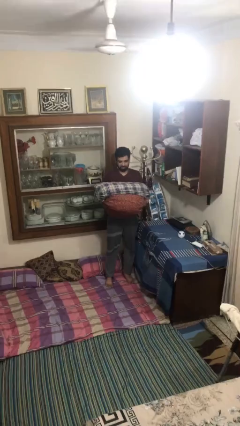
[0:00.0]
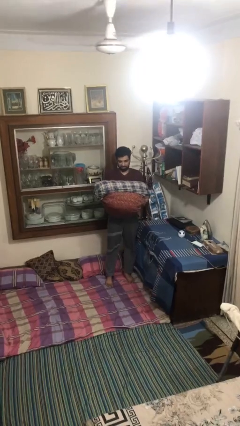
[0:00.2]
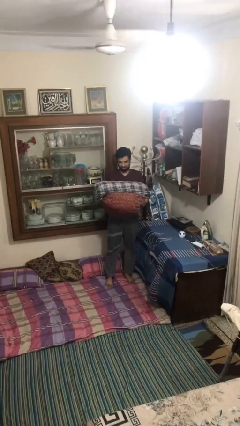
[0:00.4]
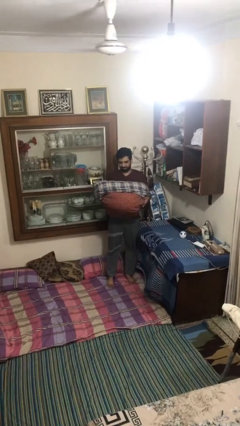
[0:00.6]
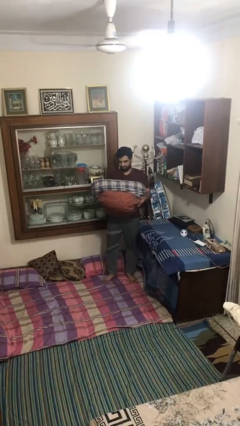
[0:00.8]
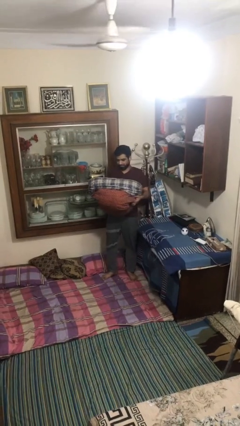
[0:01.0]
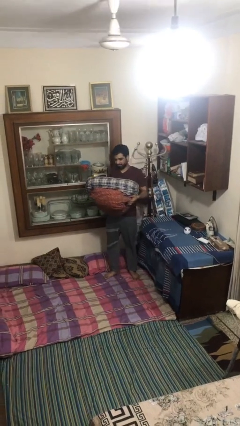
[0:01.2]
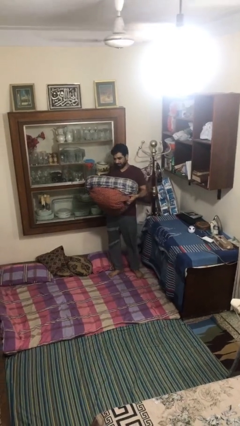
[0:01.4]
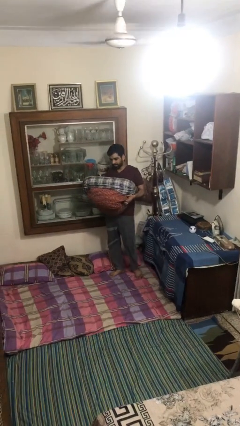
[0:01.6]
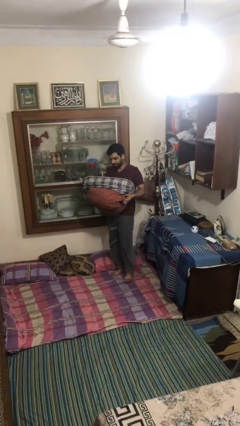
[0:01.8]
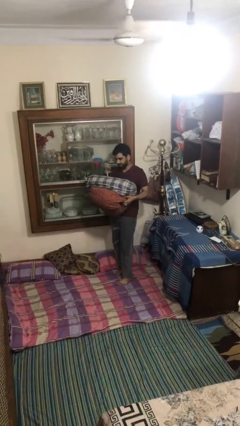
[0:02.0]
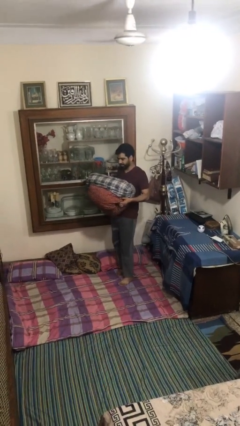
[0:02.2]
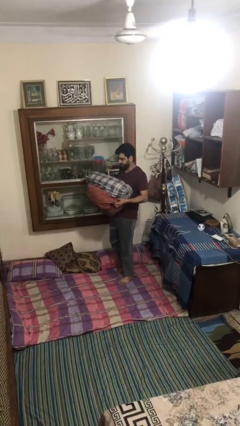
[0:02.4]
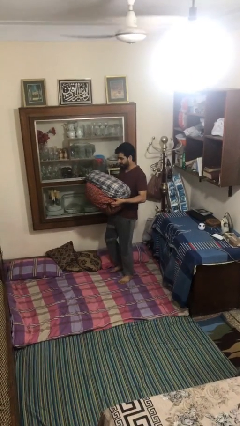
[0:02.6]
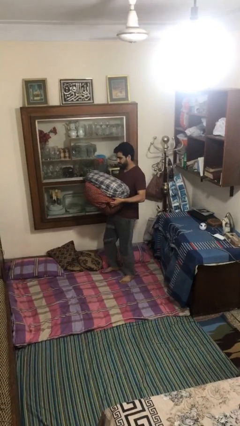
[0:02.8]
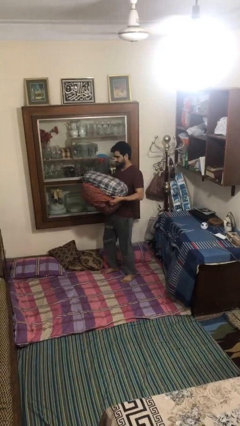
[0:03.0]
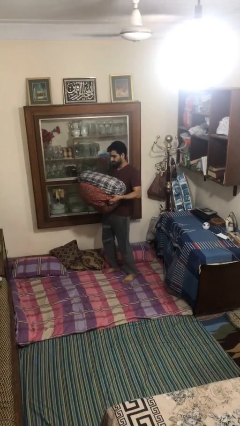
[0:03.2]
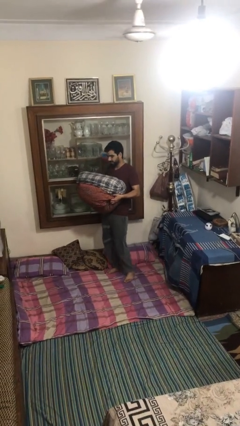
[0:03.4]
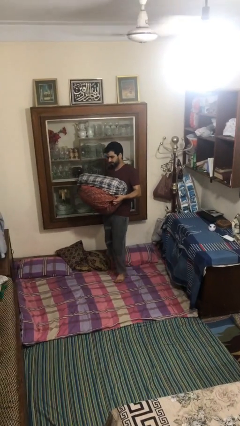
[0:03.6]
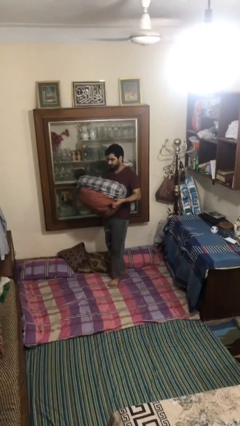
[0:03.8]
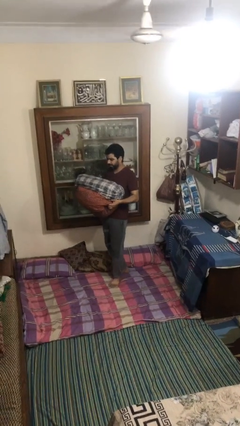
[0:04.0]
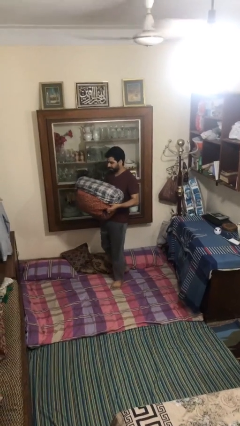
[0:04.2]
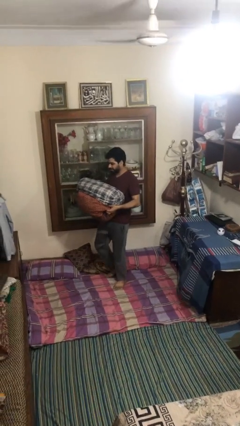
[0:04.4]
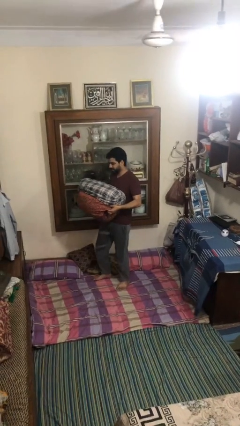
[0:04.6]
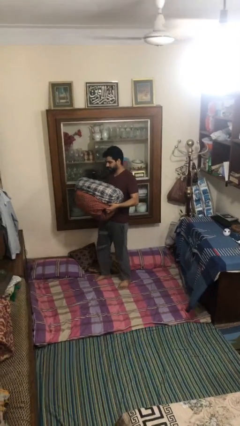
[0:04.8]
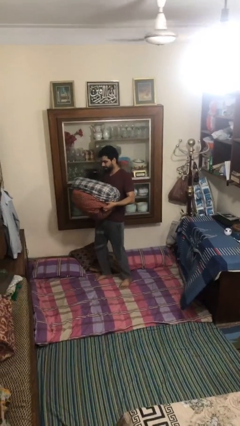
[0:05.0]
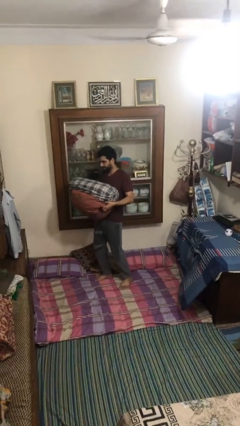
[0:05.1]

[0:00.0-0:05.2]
person carries heavy object

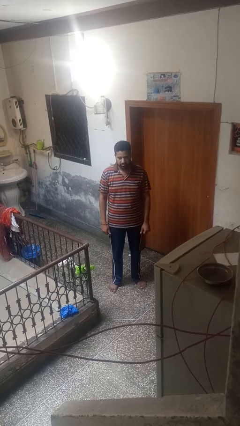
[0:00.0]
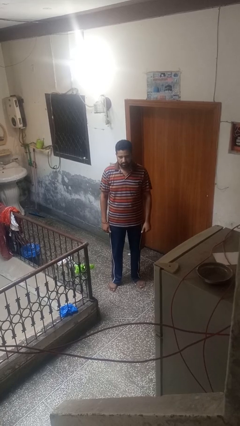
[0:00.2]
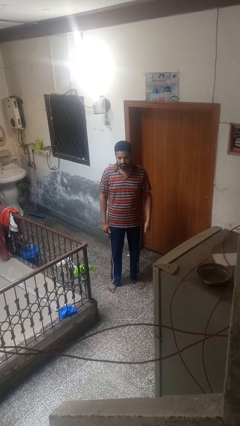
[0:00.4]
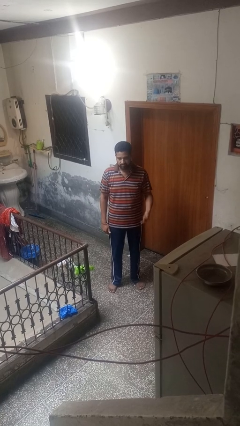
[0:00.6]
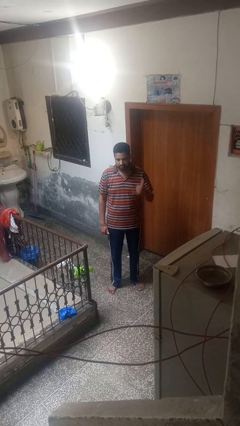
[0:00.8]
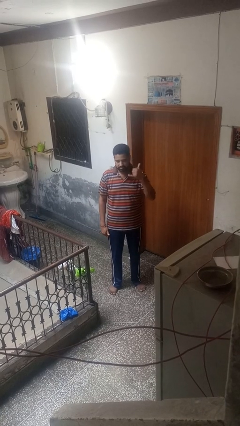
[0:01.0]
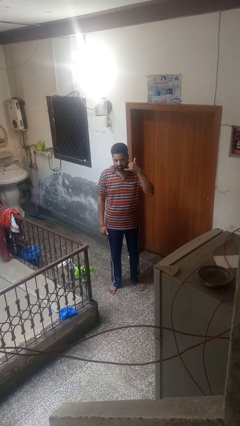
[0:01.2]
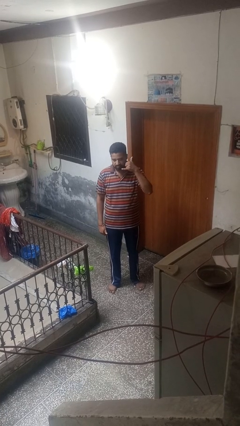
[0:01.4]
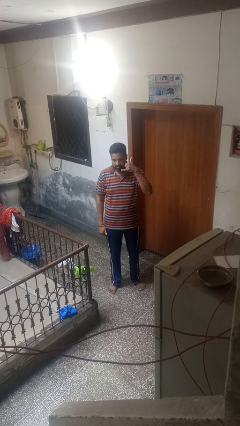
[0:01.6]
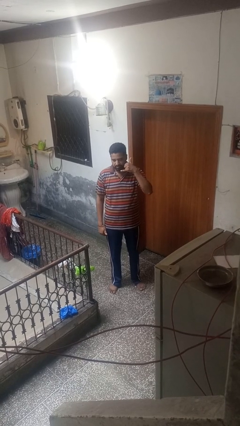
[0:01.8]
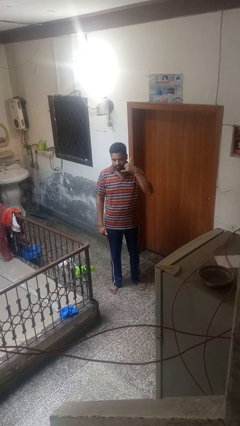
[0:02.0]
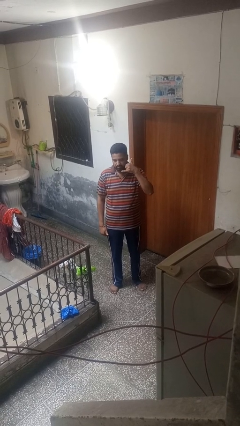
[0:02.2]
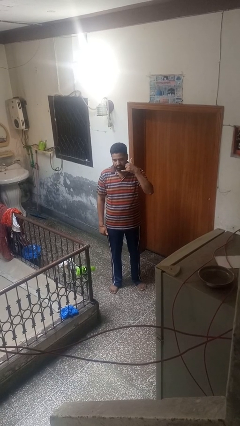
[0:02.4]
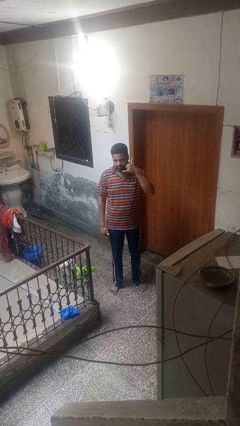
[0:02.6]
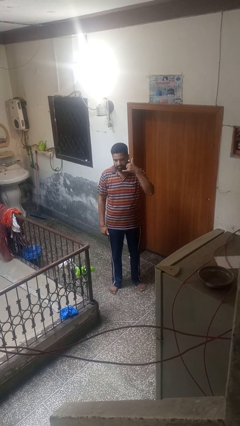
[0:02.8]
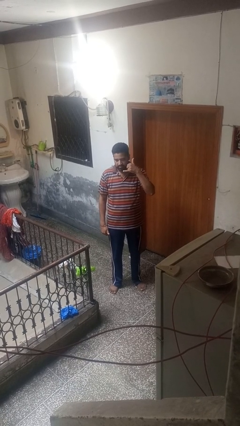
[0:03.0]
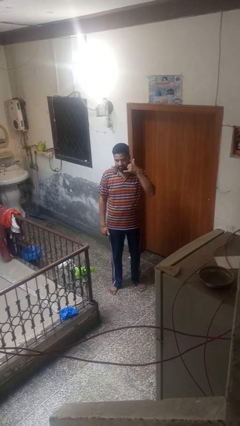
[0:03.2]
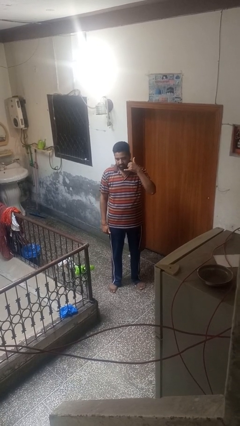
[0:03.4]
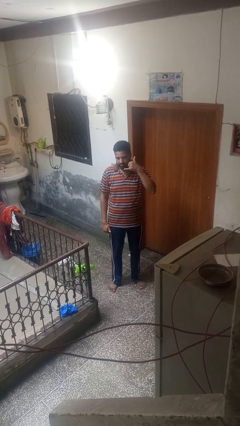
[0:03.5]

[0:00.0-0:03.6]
person gestures call me

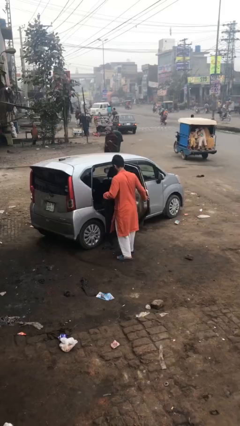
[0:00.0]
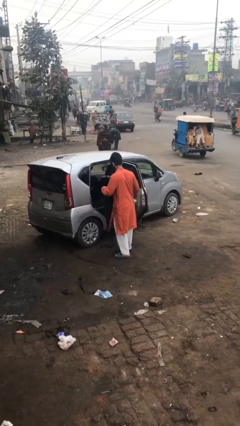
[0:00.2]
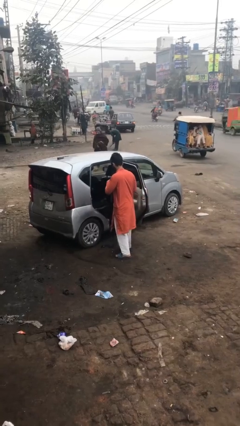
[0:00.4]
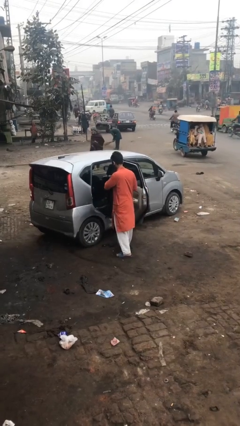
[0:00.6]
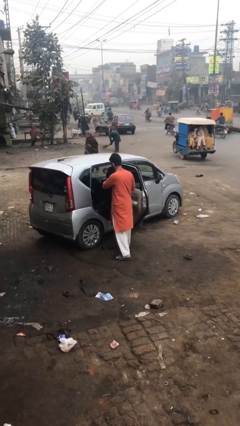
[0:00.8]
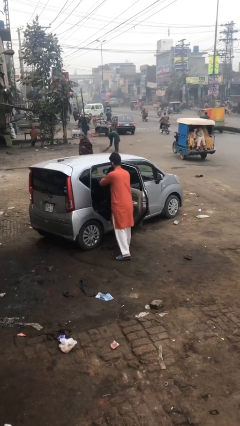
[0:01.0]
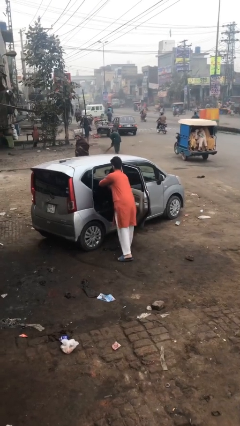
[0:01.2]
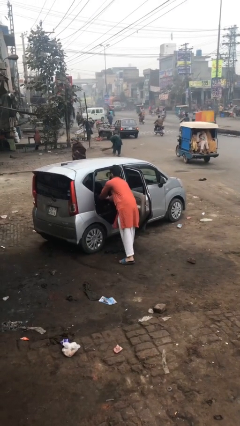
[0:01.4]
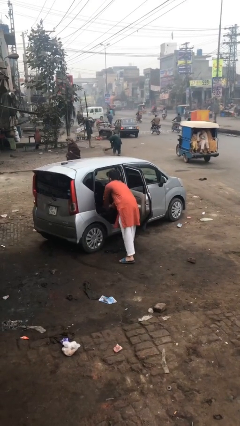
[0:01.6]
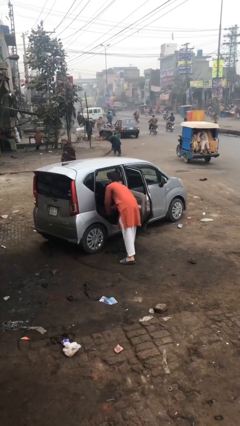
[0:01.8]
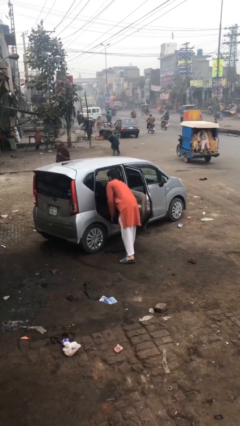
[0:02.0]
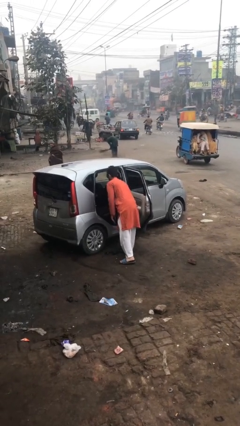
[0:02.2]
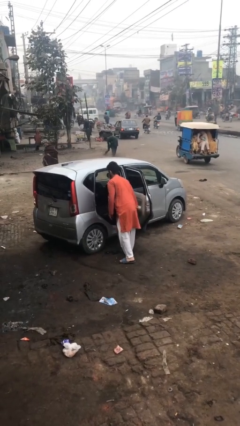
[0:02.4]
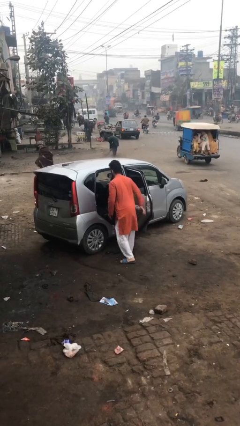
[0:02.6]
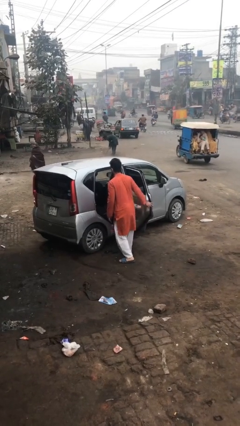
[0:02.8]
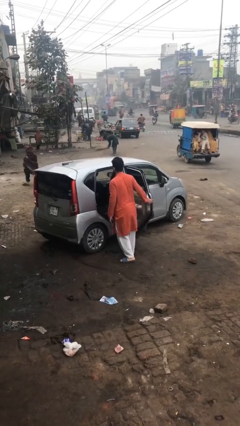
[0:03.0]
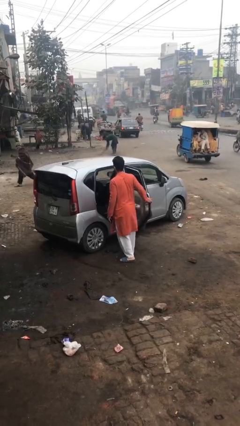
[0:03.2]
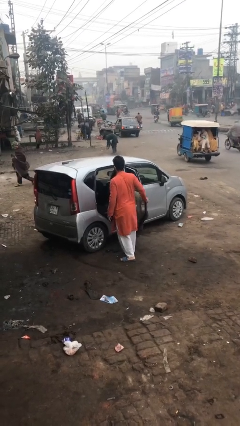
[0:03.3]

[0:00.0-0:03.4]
person loads car

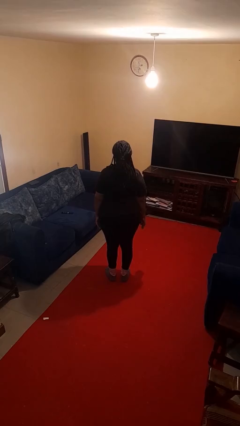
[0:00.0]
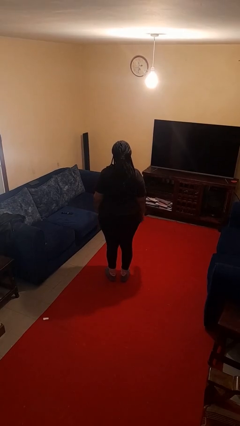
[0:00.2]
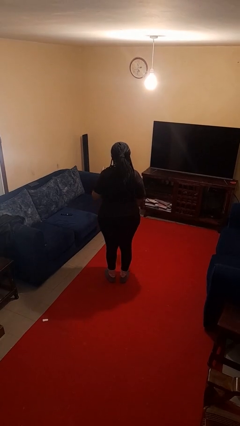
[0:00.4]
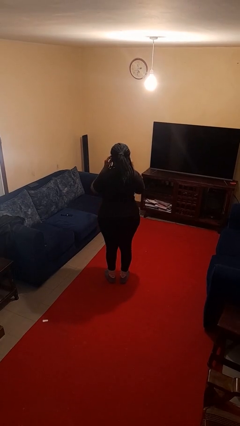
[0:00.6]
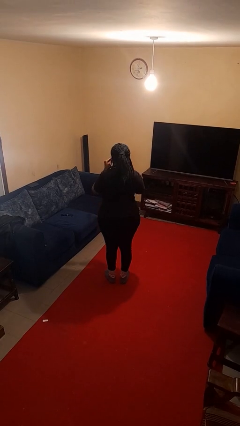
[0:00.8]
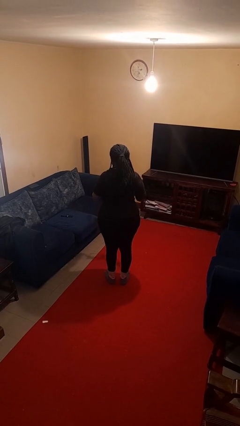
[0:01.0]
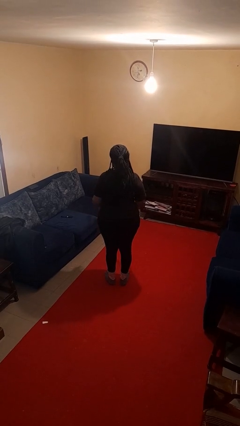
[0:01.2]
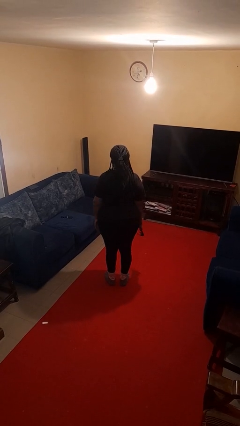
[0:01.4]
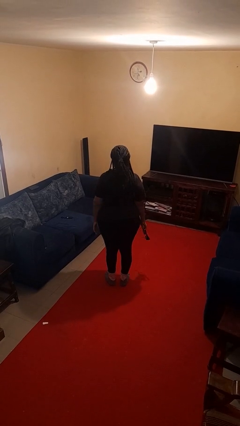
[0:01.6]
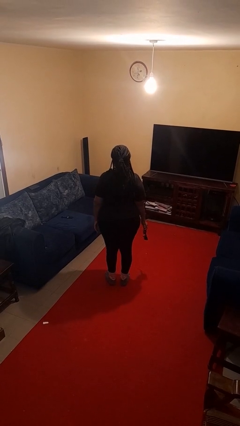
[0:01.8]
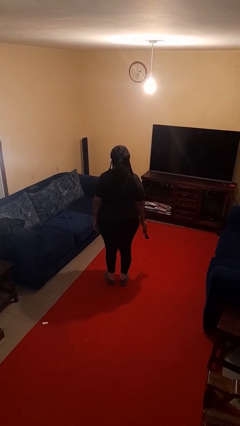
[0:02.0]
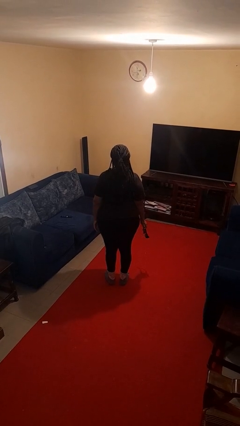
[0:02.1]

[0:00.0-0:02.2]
person takes off sunglasses

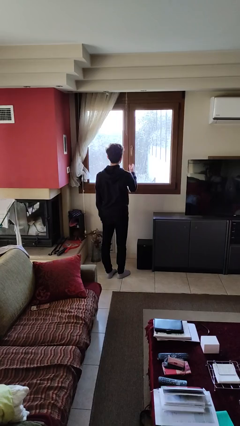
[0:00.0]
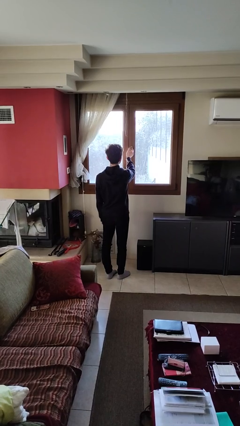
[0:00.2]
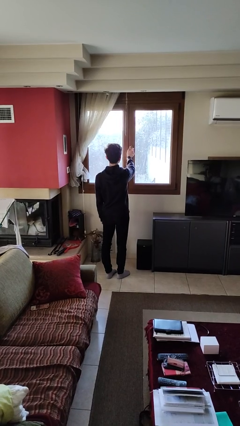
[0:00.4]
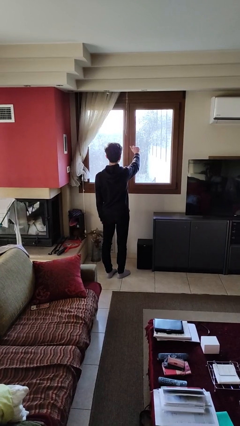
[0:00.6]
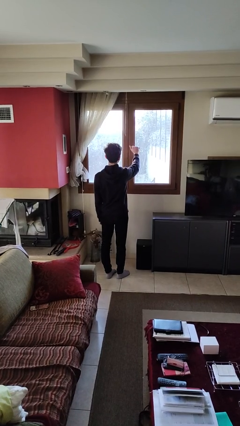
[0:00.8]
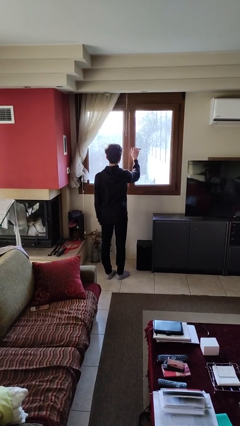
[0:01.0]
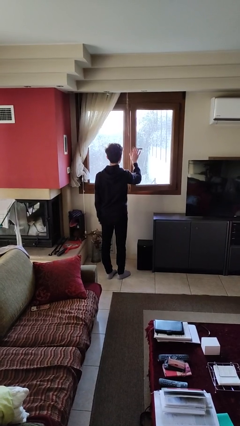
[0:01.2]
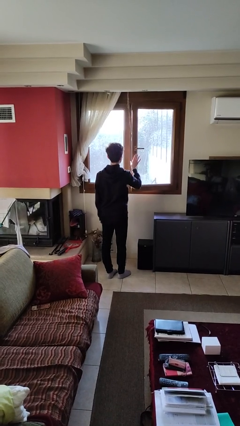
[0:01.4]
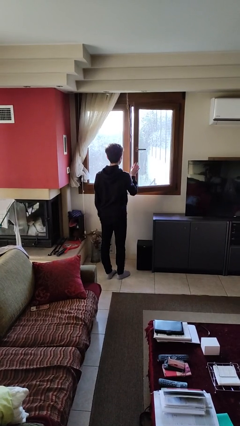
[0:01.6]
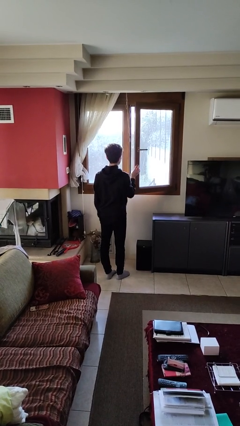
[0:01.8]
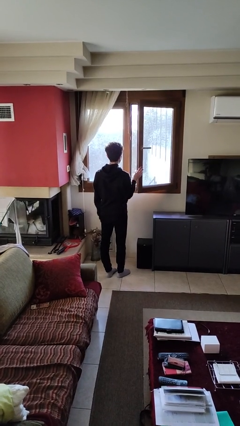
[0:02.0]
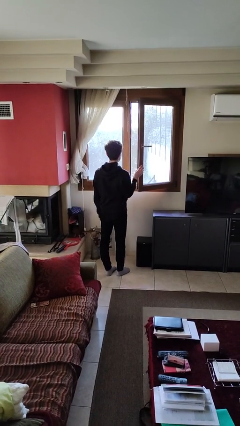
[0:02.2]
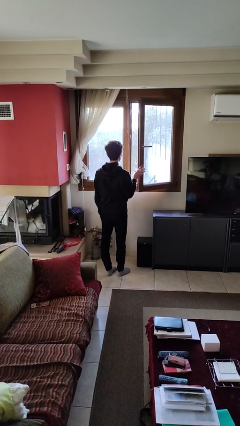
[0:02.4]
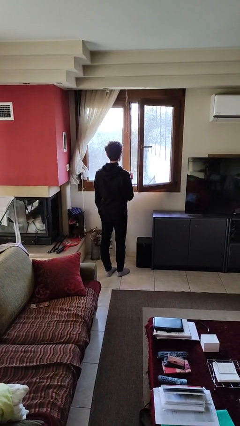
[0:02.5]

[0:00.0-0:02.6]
person opens home window

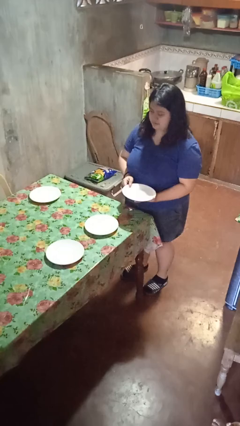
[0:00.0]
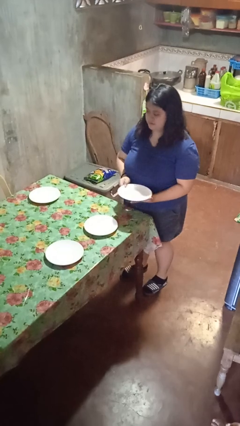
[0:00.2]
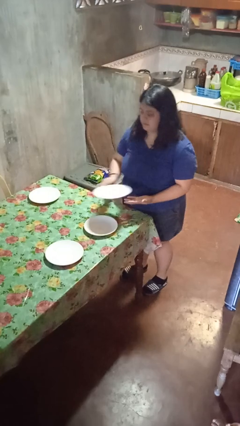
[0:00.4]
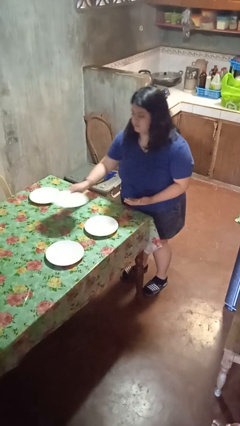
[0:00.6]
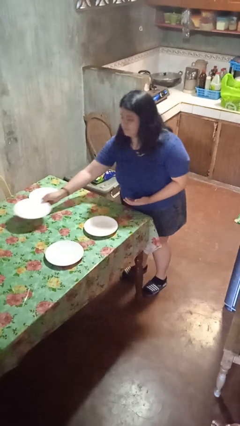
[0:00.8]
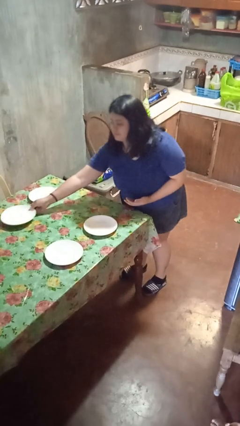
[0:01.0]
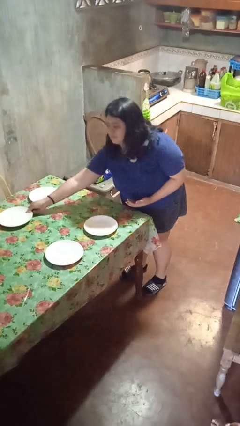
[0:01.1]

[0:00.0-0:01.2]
person sets table
